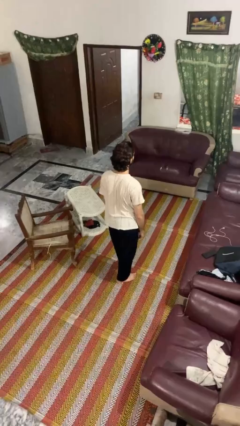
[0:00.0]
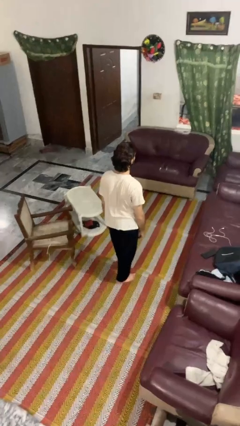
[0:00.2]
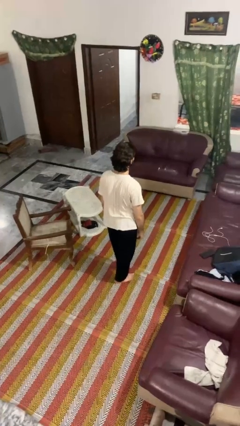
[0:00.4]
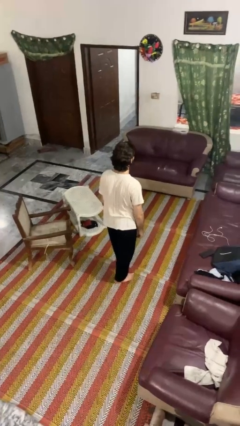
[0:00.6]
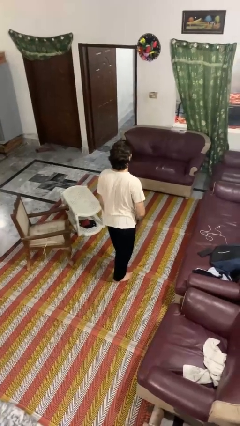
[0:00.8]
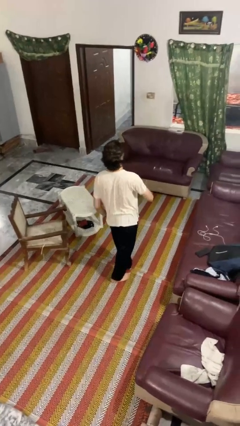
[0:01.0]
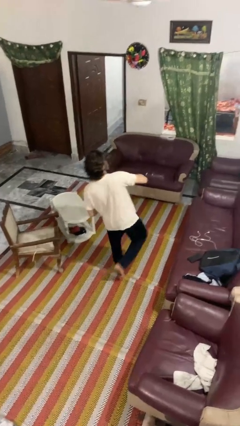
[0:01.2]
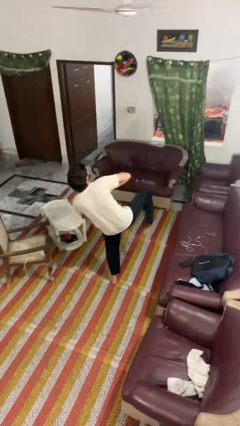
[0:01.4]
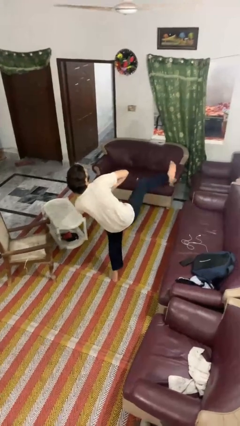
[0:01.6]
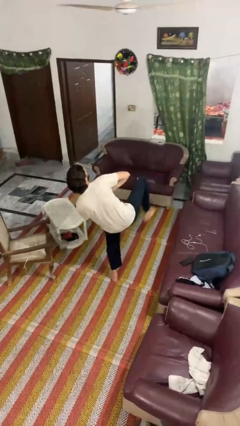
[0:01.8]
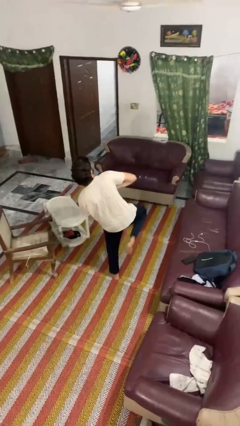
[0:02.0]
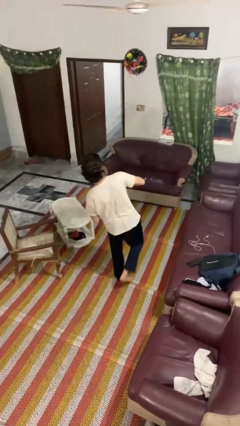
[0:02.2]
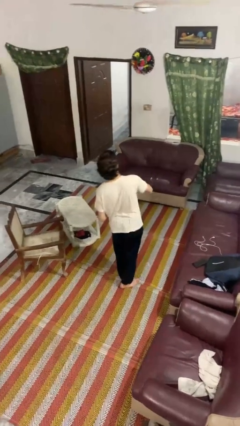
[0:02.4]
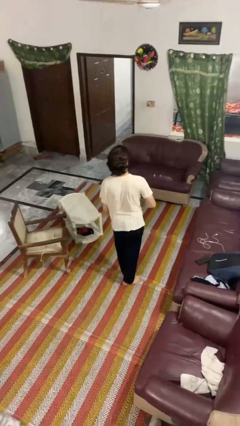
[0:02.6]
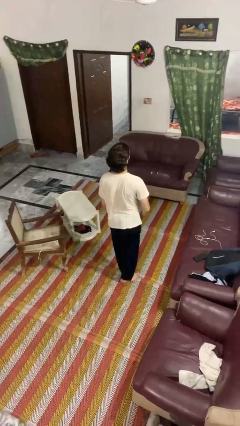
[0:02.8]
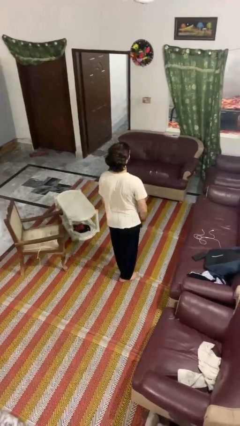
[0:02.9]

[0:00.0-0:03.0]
person karate kicks

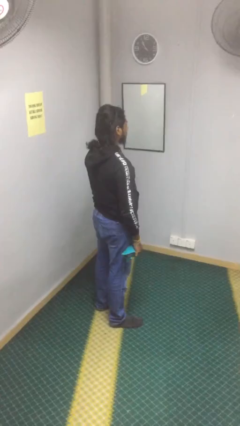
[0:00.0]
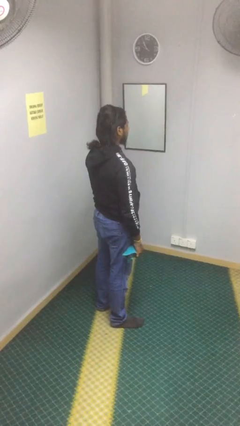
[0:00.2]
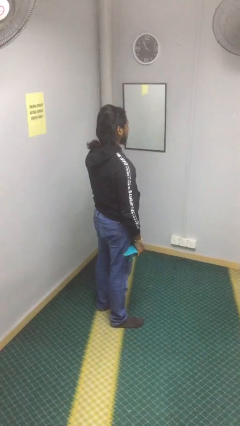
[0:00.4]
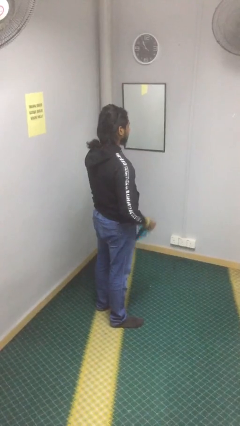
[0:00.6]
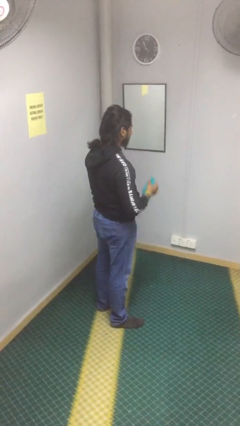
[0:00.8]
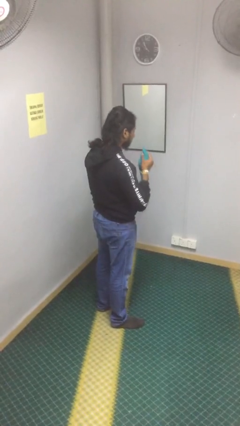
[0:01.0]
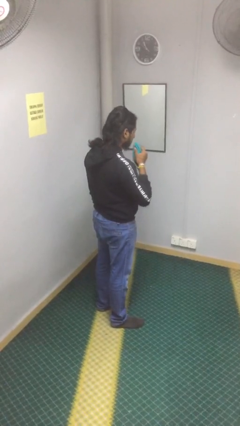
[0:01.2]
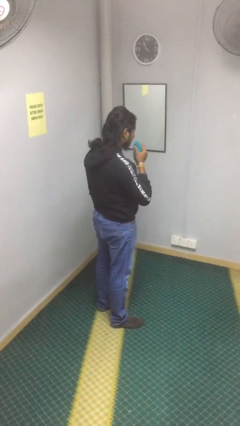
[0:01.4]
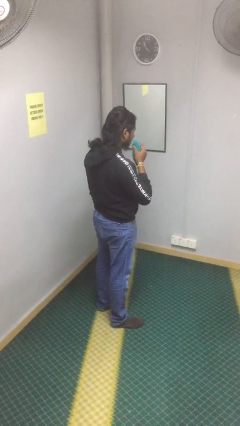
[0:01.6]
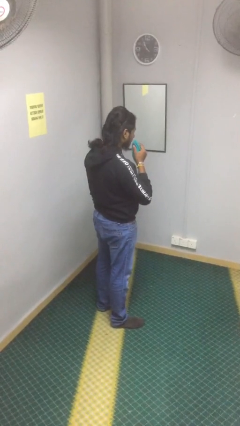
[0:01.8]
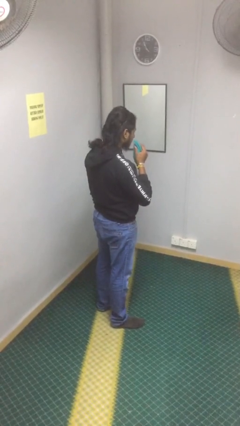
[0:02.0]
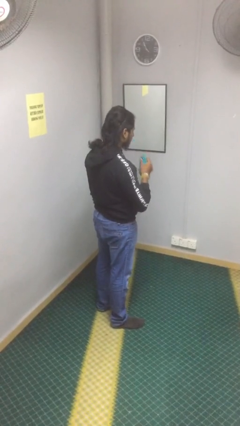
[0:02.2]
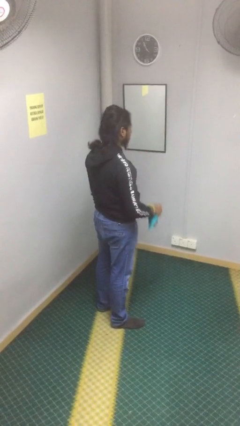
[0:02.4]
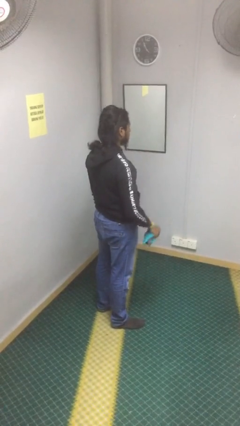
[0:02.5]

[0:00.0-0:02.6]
person wipes mouth with napkin

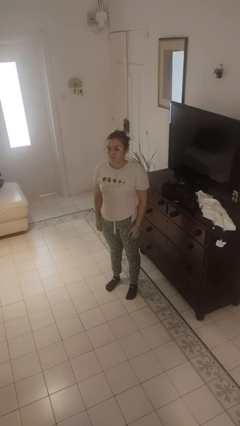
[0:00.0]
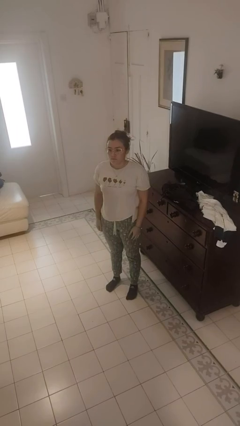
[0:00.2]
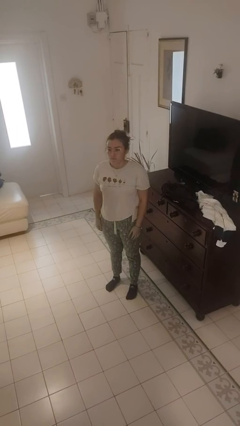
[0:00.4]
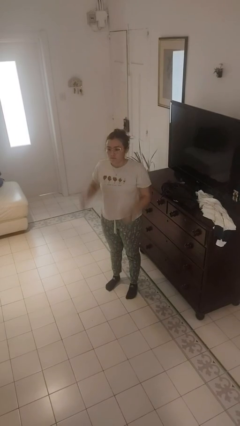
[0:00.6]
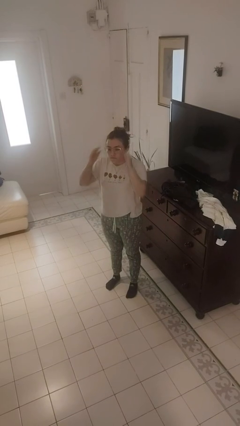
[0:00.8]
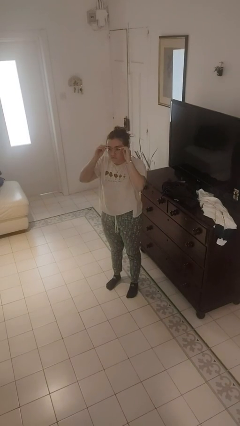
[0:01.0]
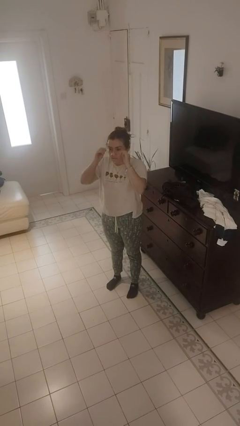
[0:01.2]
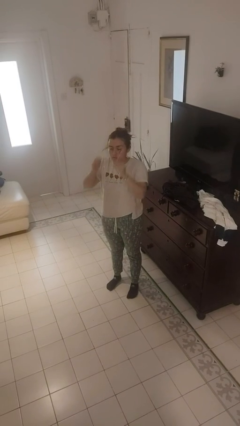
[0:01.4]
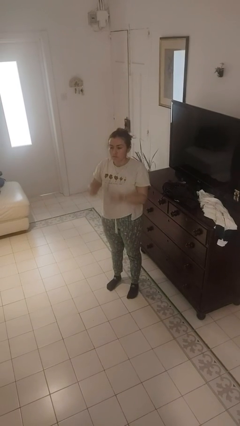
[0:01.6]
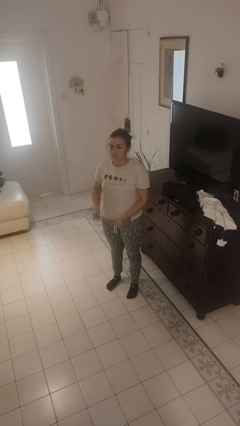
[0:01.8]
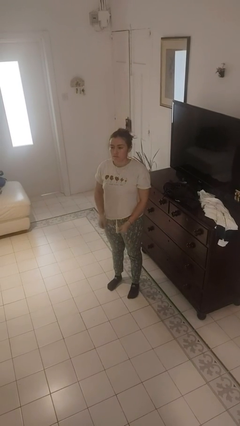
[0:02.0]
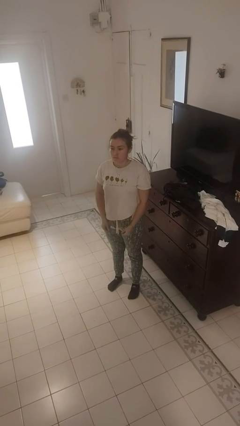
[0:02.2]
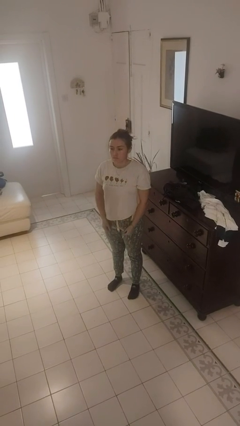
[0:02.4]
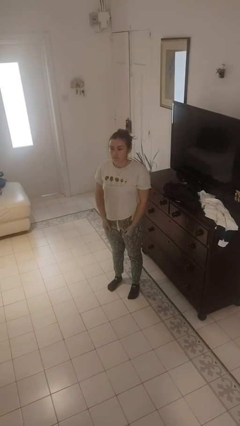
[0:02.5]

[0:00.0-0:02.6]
person takes off glasses

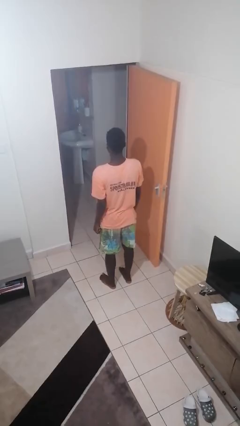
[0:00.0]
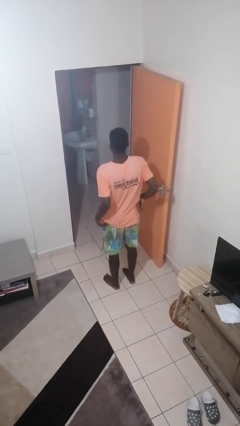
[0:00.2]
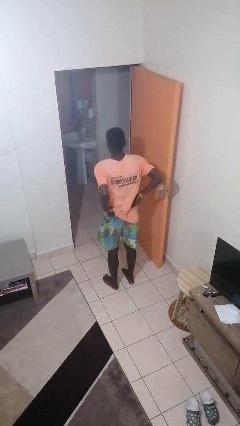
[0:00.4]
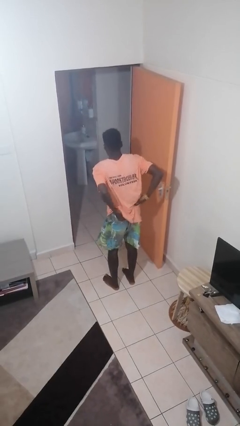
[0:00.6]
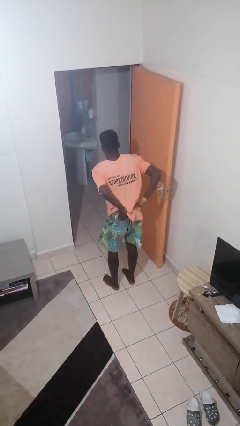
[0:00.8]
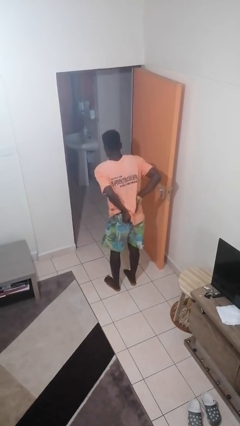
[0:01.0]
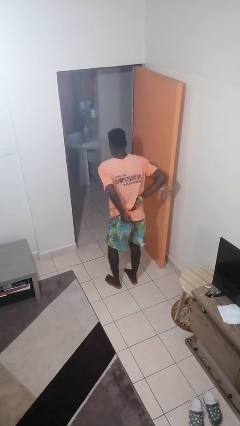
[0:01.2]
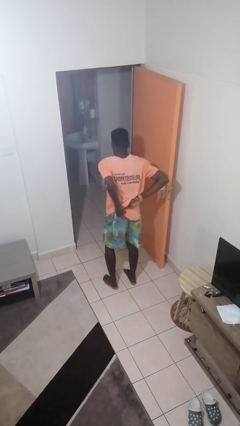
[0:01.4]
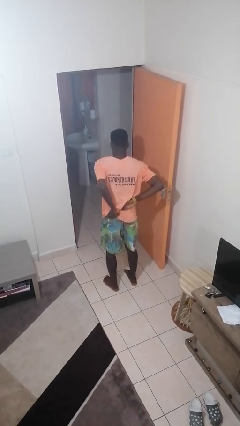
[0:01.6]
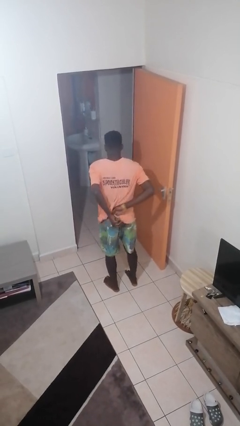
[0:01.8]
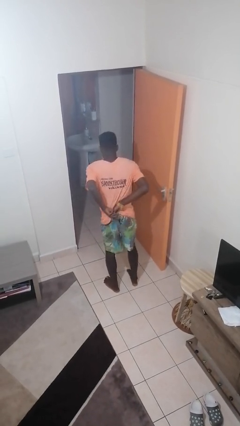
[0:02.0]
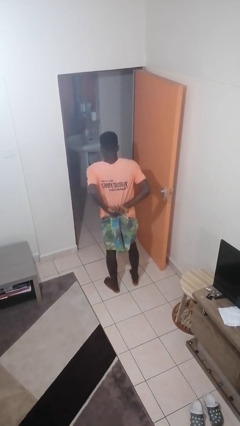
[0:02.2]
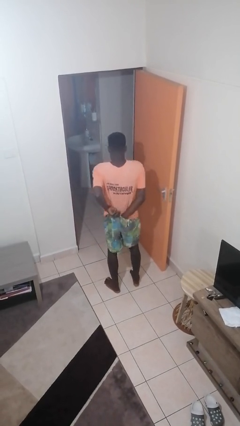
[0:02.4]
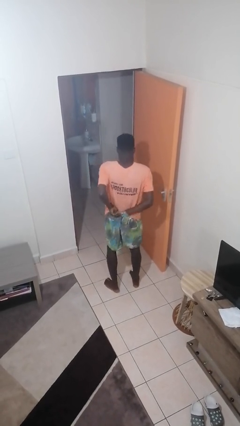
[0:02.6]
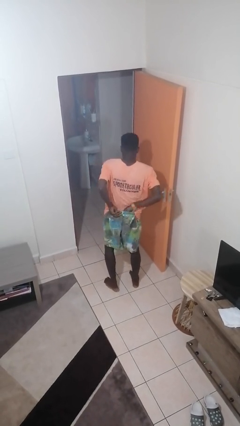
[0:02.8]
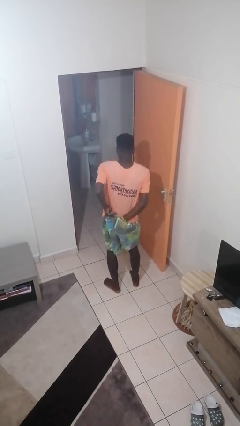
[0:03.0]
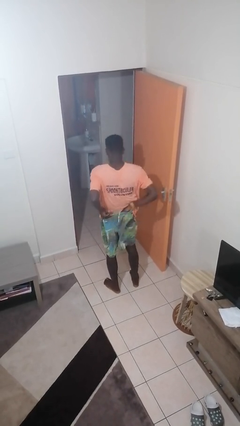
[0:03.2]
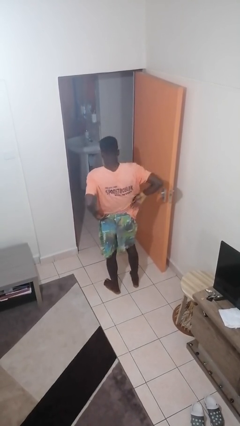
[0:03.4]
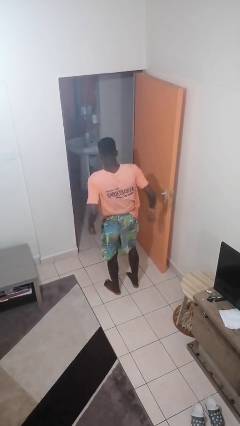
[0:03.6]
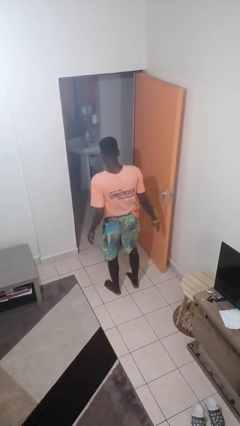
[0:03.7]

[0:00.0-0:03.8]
person tucks in shirt

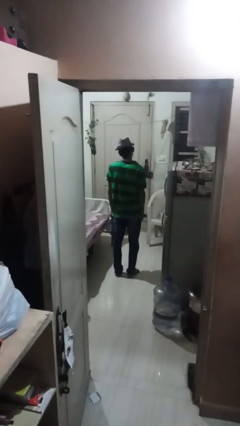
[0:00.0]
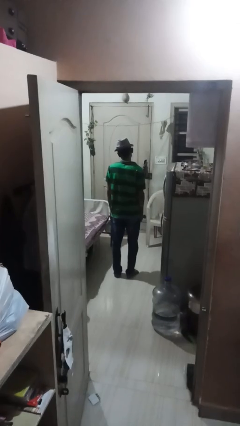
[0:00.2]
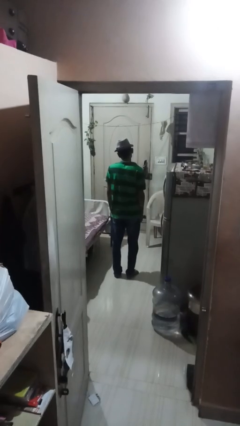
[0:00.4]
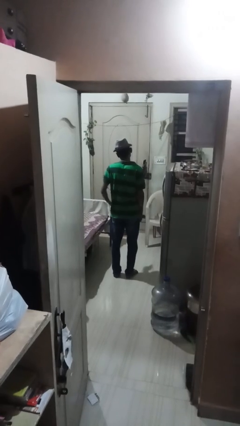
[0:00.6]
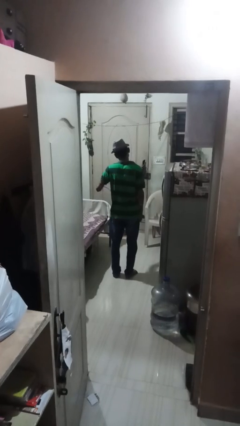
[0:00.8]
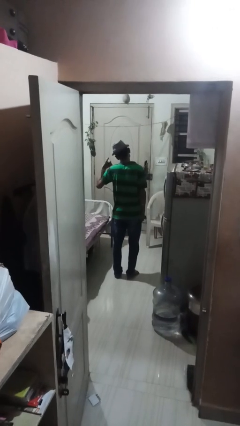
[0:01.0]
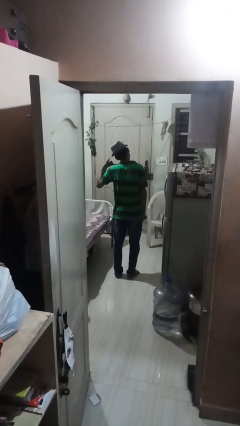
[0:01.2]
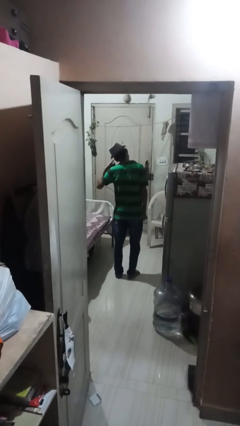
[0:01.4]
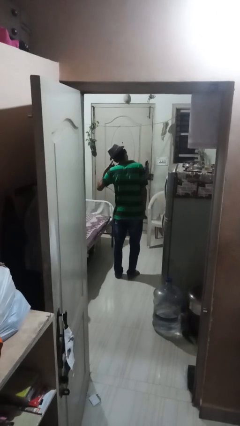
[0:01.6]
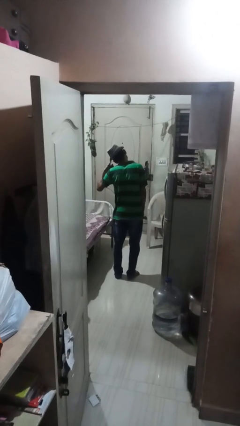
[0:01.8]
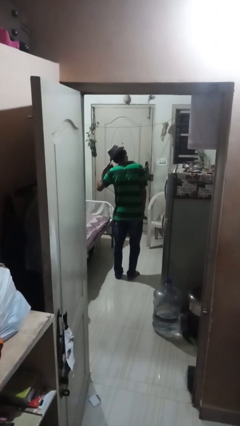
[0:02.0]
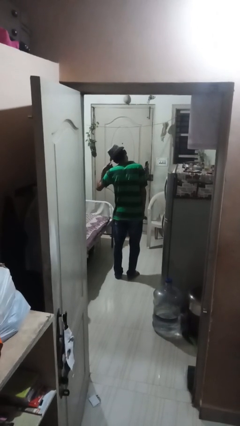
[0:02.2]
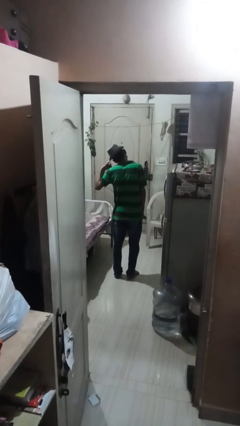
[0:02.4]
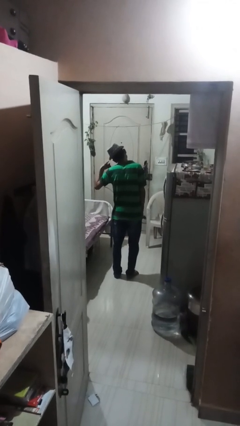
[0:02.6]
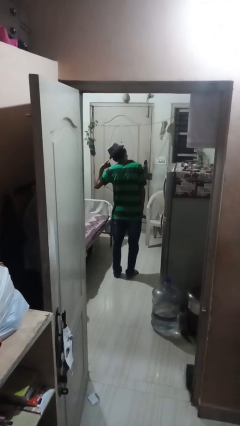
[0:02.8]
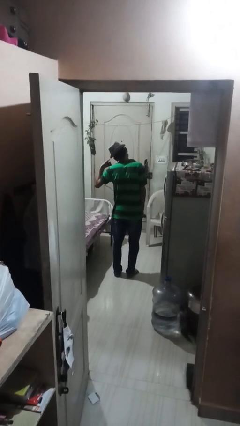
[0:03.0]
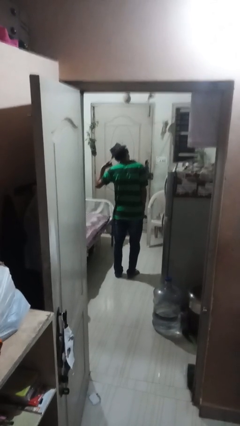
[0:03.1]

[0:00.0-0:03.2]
person gestures call me

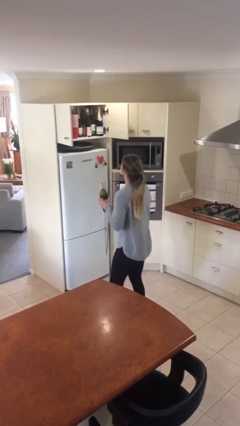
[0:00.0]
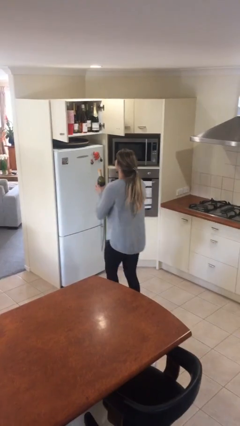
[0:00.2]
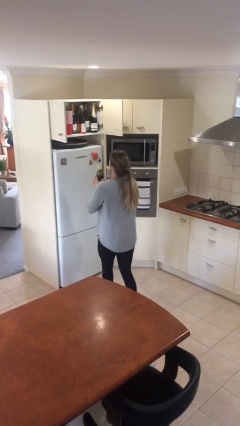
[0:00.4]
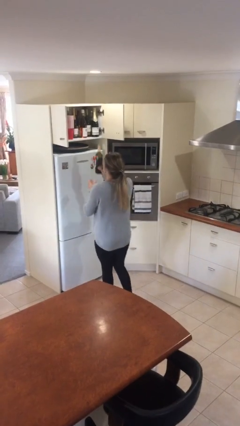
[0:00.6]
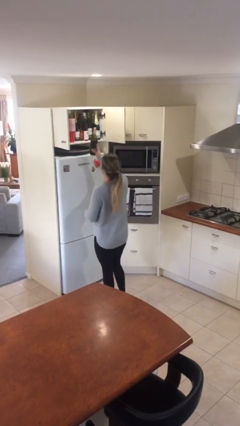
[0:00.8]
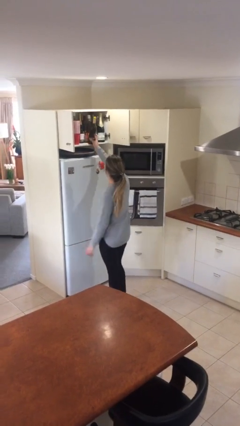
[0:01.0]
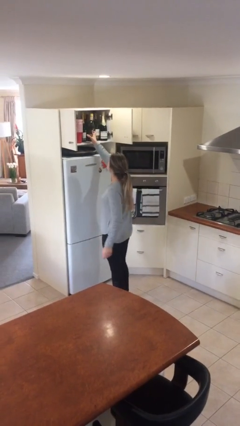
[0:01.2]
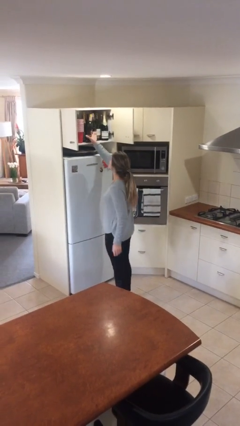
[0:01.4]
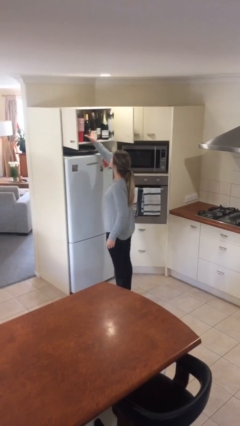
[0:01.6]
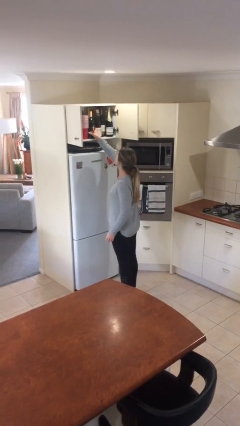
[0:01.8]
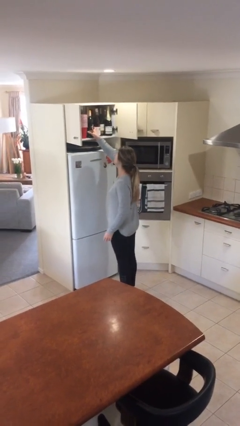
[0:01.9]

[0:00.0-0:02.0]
person puts down object on shelf
